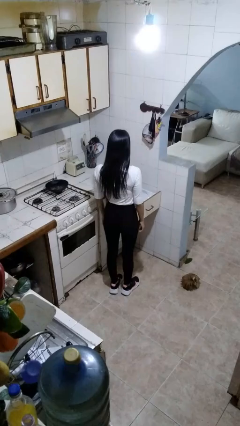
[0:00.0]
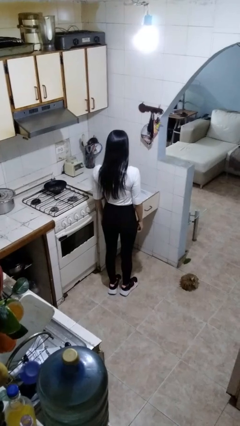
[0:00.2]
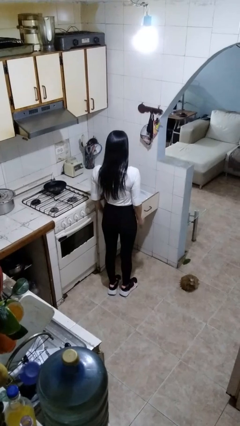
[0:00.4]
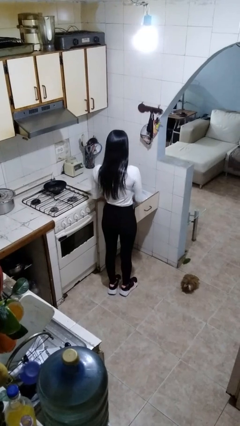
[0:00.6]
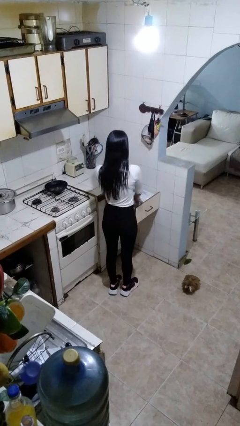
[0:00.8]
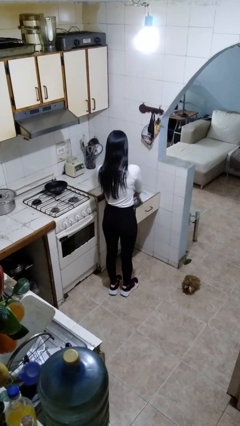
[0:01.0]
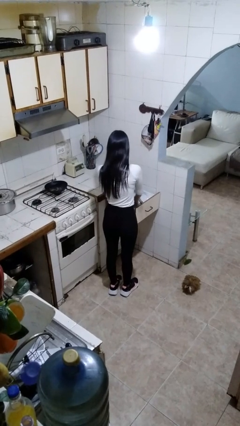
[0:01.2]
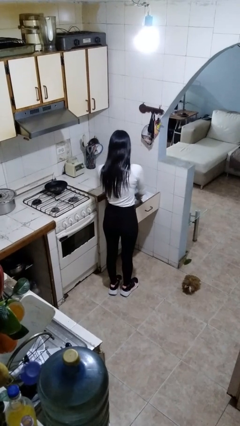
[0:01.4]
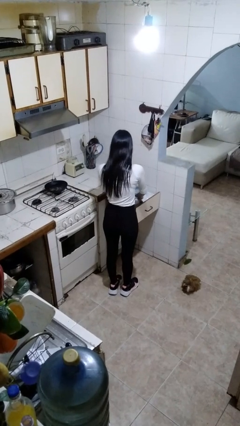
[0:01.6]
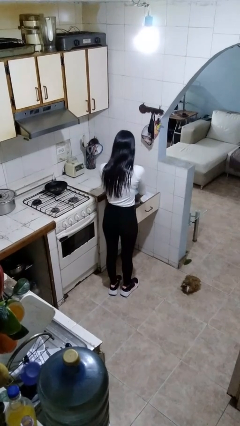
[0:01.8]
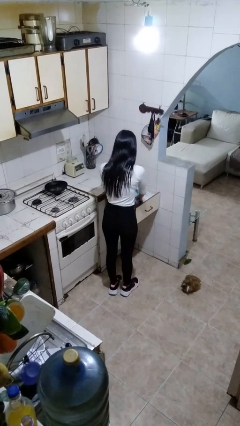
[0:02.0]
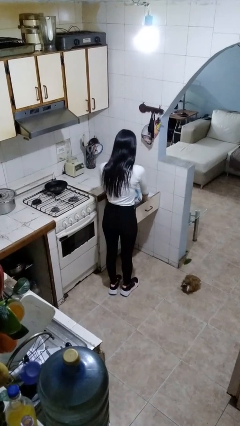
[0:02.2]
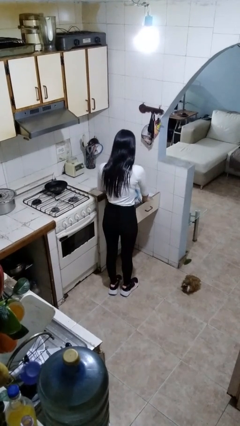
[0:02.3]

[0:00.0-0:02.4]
person searches in kitchen drawer

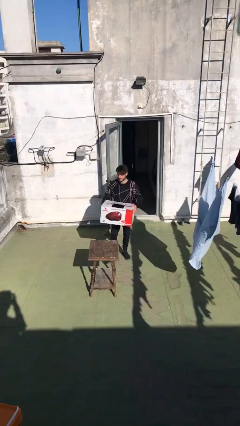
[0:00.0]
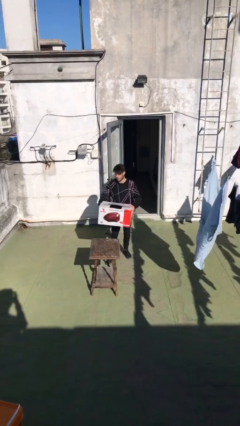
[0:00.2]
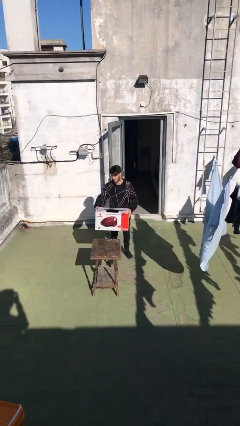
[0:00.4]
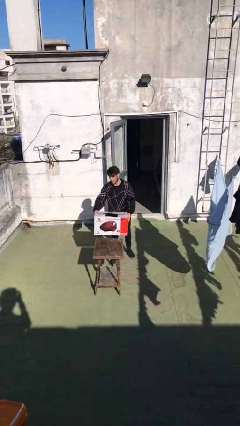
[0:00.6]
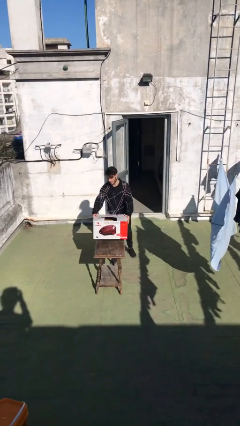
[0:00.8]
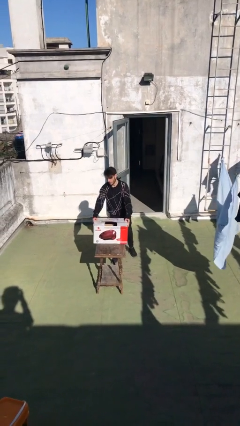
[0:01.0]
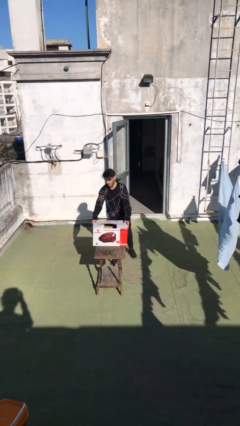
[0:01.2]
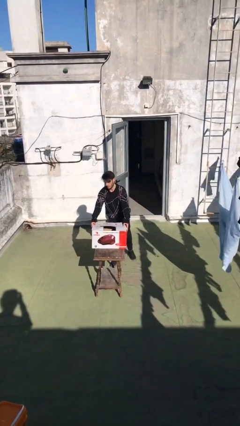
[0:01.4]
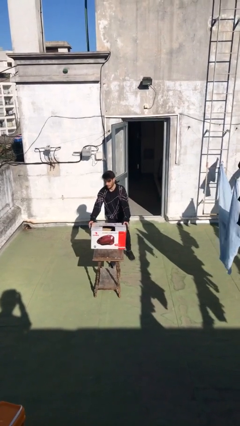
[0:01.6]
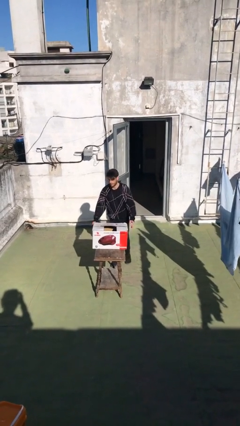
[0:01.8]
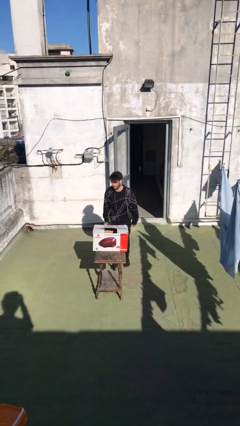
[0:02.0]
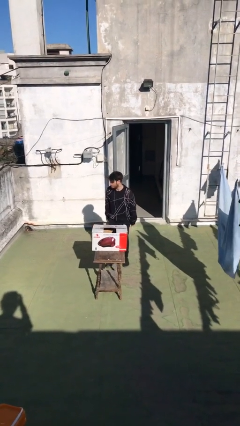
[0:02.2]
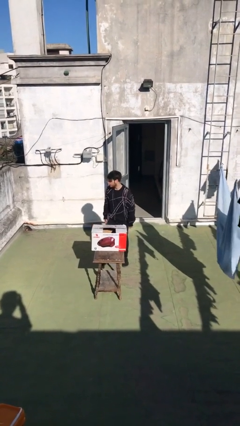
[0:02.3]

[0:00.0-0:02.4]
person puts down object on table

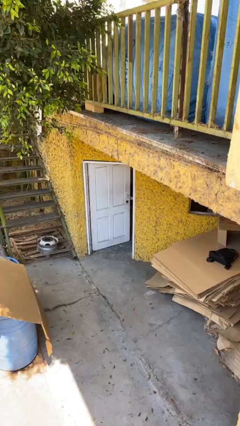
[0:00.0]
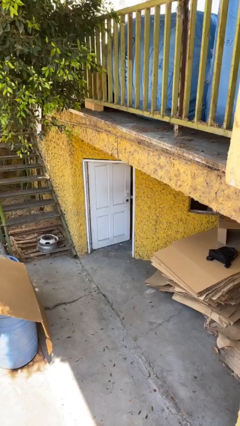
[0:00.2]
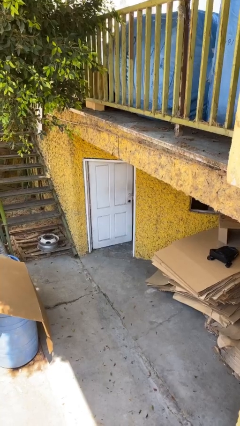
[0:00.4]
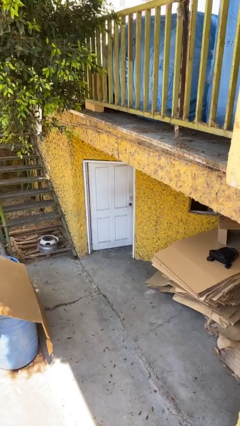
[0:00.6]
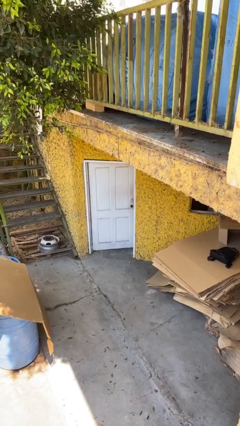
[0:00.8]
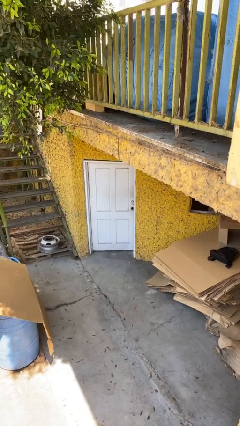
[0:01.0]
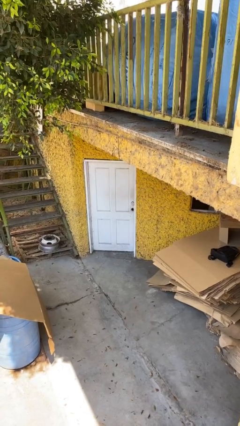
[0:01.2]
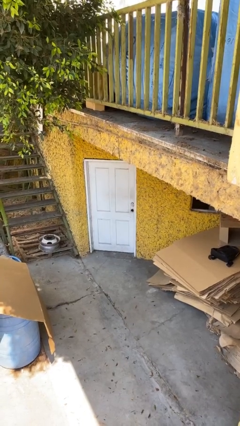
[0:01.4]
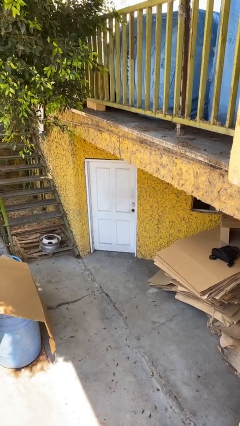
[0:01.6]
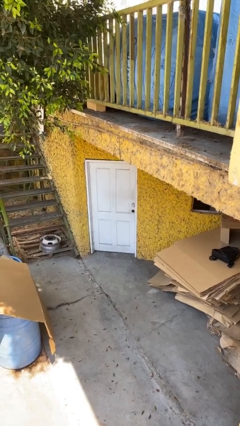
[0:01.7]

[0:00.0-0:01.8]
person closes facility door

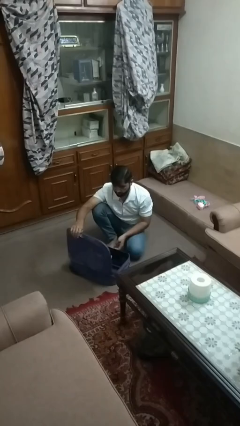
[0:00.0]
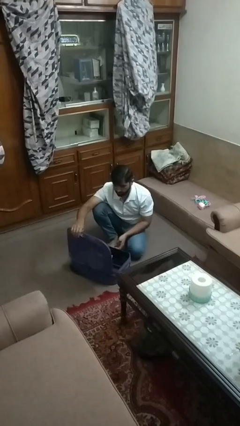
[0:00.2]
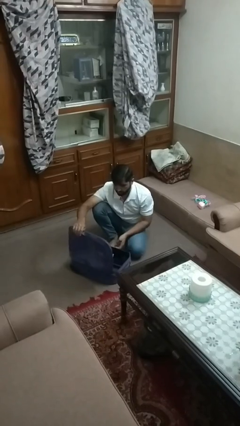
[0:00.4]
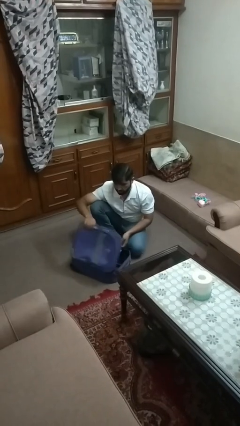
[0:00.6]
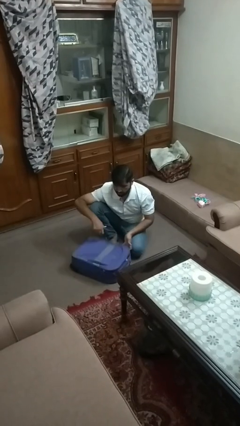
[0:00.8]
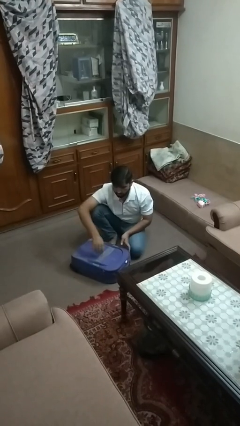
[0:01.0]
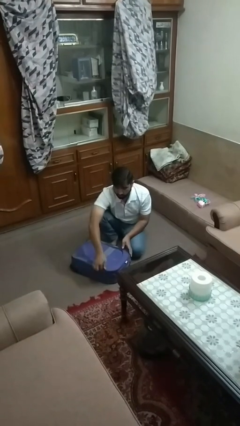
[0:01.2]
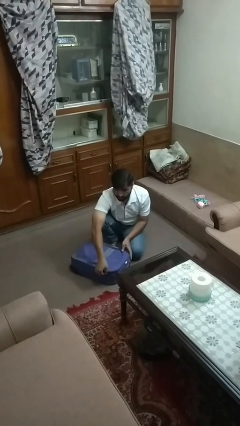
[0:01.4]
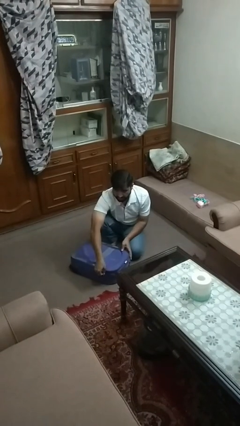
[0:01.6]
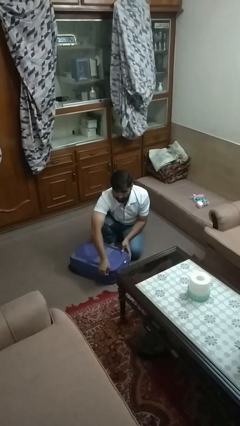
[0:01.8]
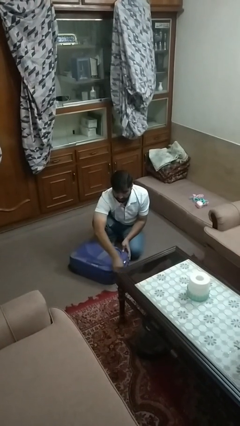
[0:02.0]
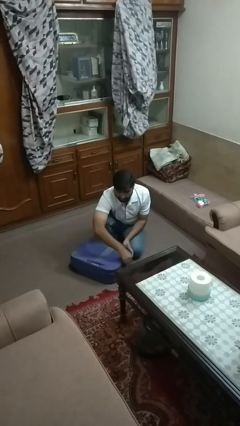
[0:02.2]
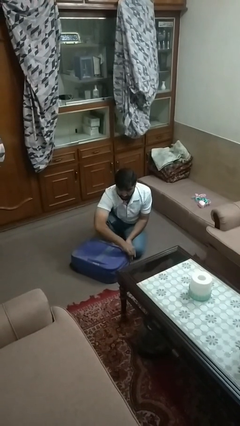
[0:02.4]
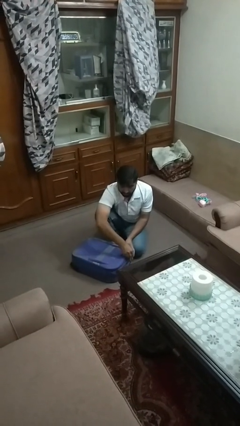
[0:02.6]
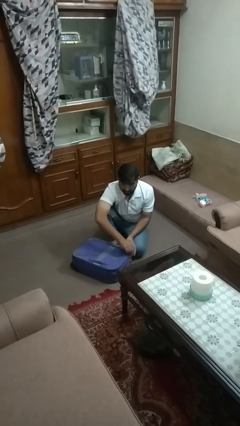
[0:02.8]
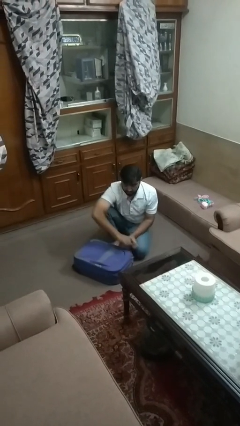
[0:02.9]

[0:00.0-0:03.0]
person closes suitcase

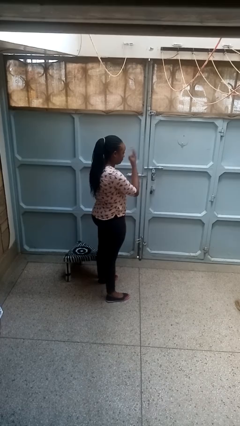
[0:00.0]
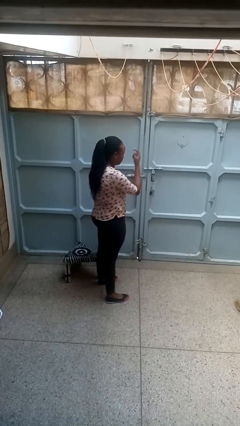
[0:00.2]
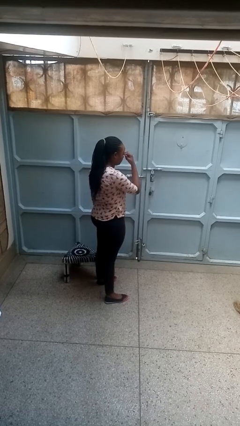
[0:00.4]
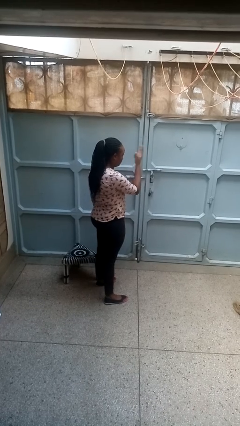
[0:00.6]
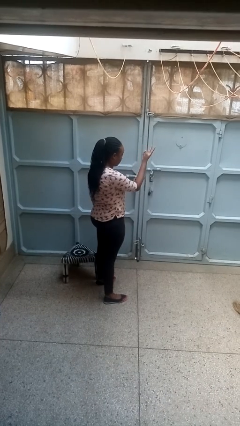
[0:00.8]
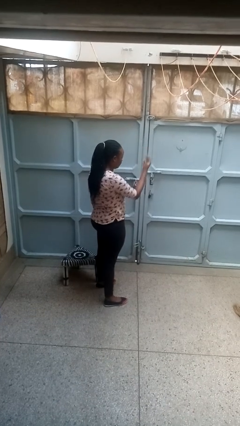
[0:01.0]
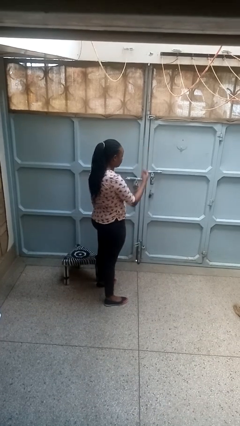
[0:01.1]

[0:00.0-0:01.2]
person gestures watch closely

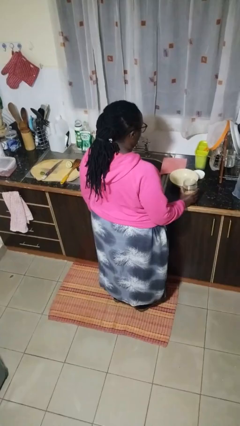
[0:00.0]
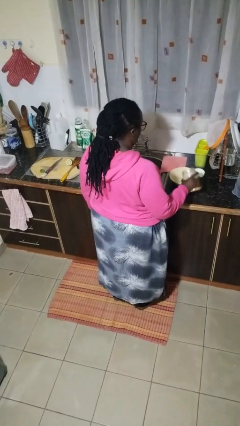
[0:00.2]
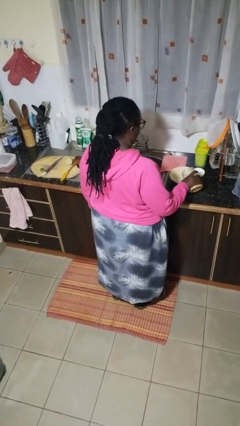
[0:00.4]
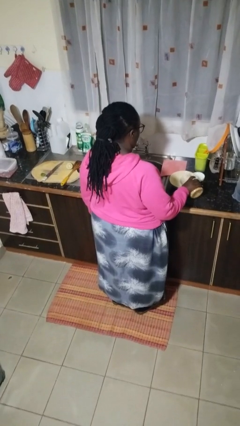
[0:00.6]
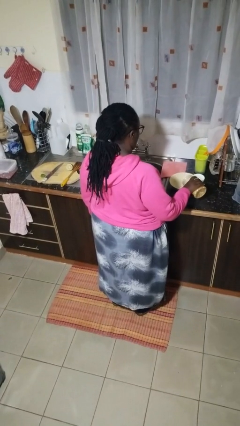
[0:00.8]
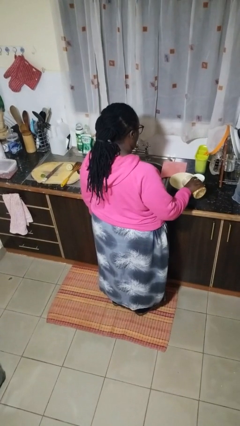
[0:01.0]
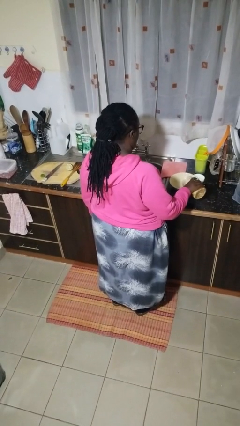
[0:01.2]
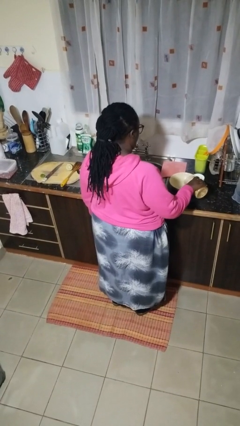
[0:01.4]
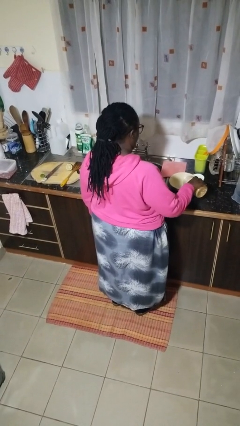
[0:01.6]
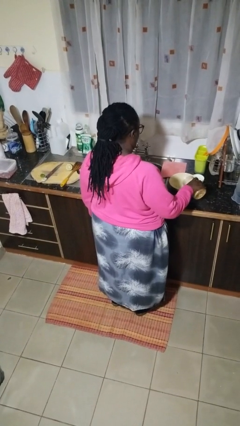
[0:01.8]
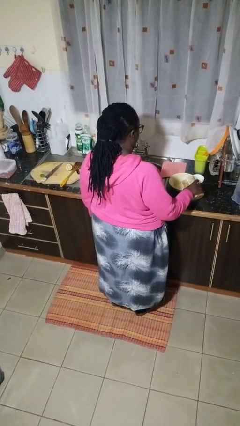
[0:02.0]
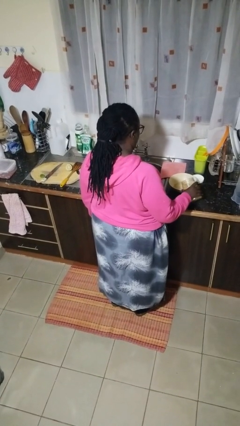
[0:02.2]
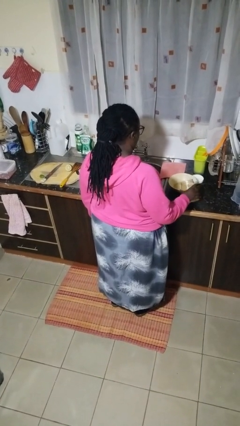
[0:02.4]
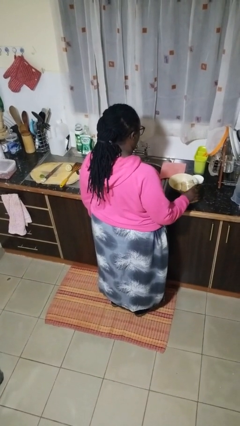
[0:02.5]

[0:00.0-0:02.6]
person pours into bowl

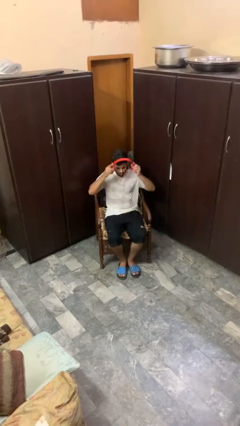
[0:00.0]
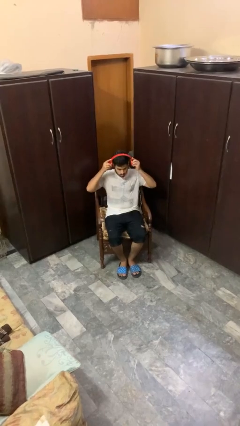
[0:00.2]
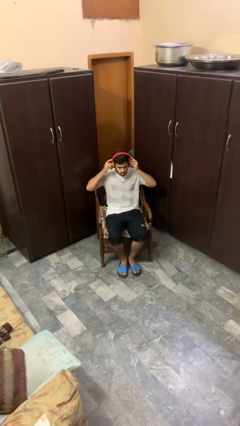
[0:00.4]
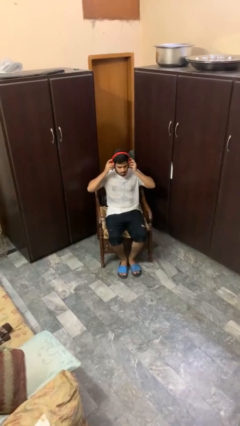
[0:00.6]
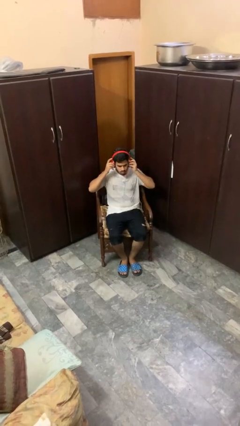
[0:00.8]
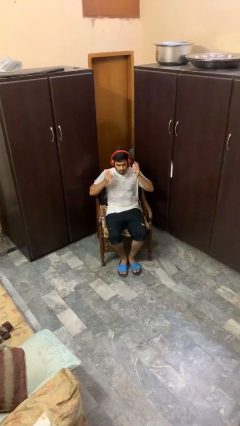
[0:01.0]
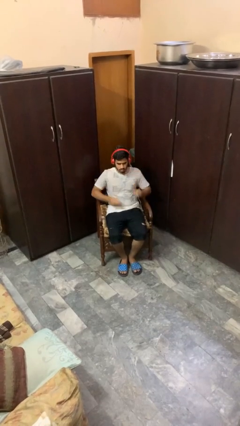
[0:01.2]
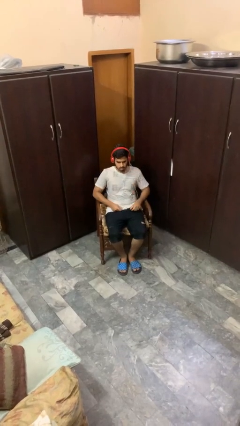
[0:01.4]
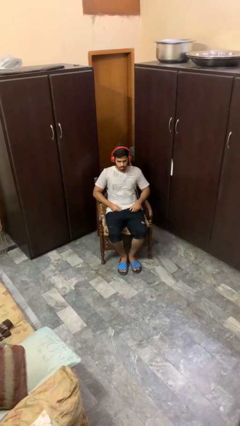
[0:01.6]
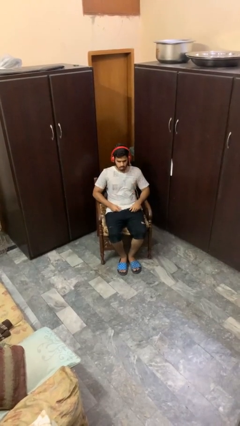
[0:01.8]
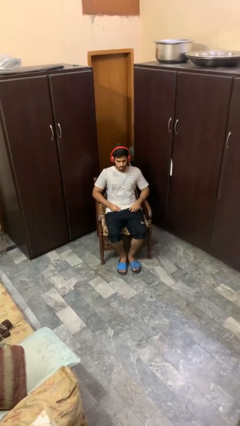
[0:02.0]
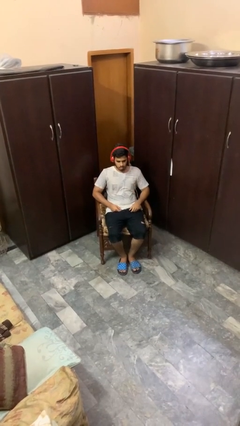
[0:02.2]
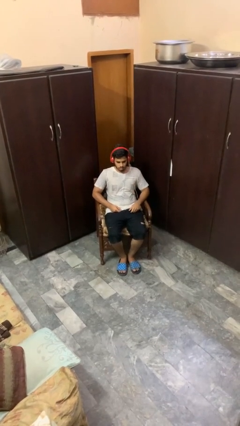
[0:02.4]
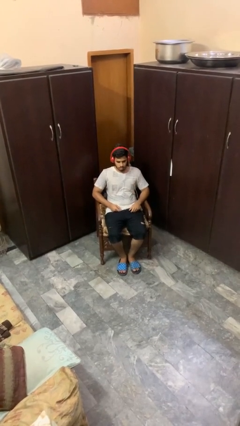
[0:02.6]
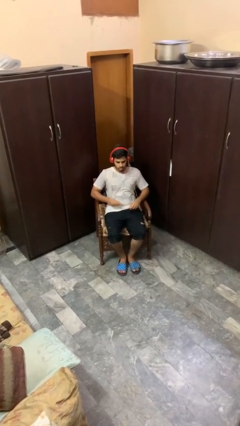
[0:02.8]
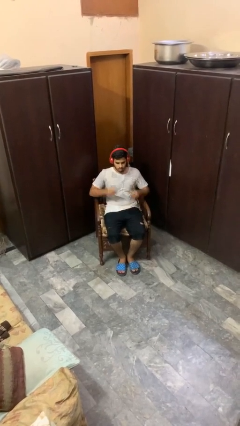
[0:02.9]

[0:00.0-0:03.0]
person puts on headphones

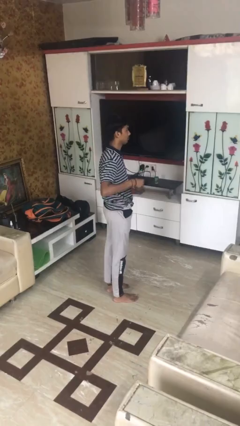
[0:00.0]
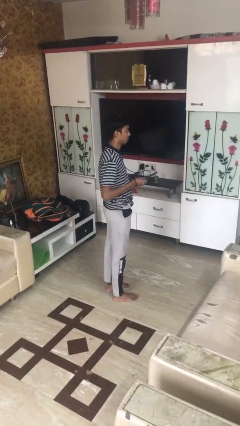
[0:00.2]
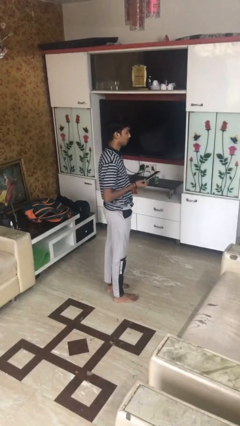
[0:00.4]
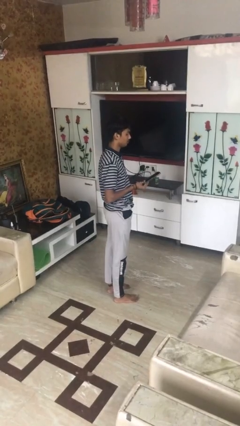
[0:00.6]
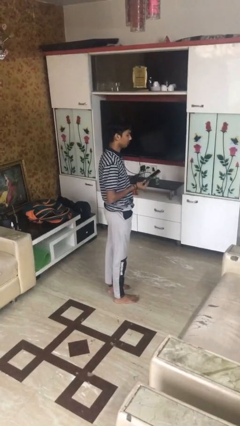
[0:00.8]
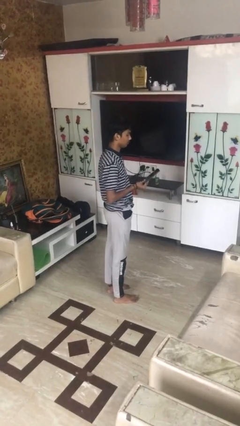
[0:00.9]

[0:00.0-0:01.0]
person takes phone from pocket
